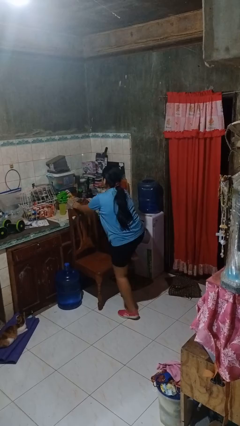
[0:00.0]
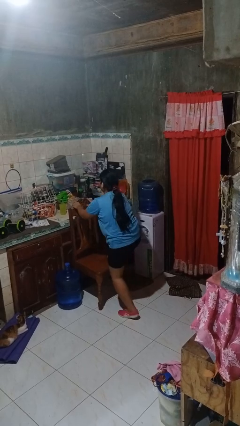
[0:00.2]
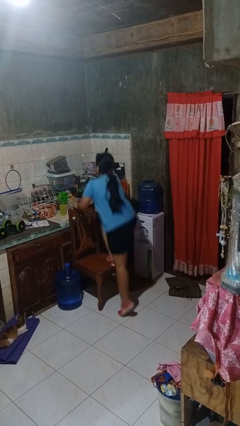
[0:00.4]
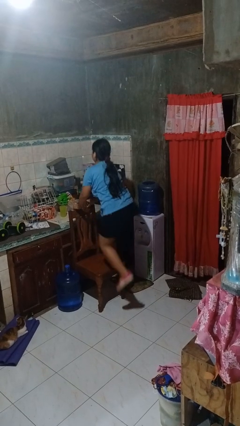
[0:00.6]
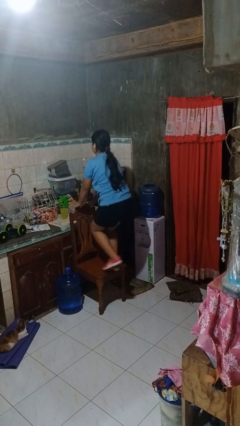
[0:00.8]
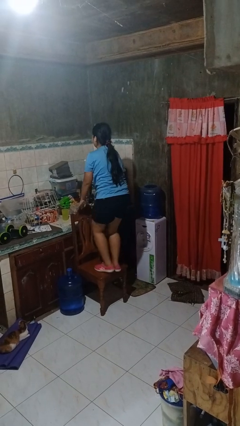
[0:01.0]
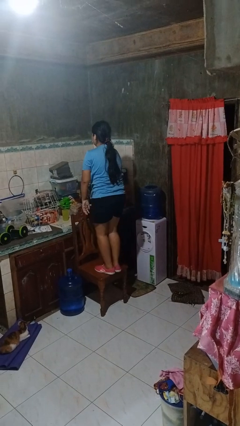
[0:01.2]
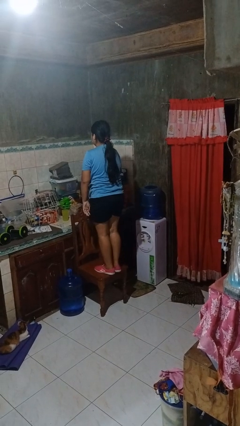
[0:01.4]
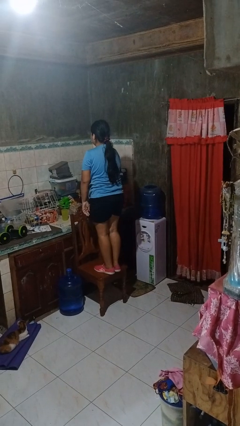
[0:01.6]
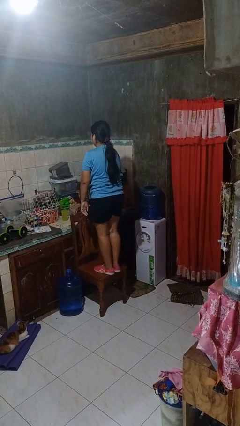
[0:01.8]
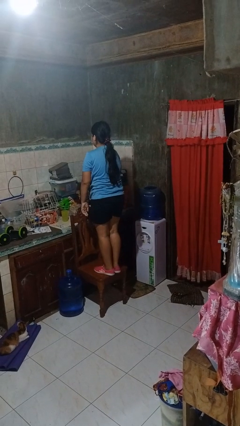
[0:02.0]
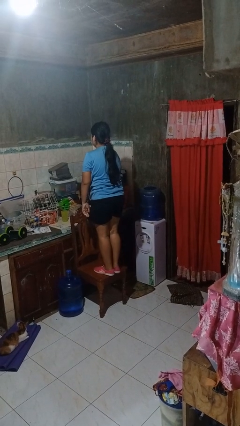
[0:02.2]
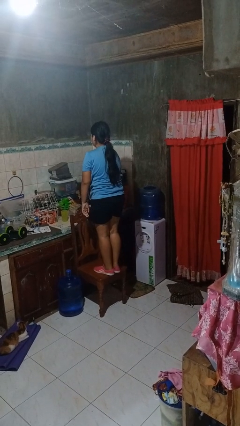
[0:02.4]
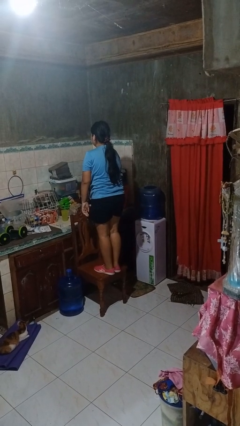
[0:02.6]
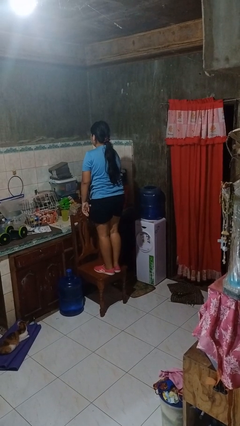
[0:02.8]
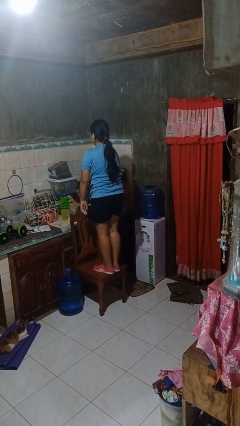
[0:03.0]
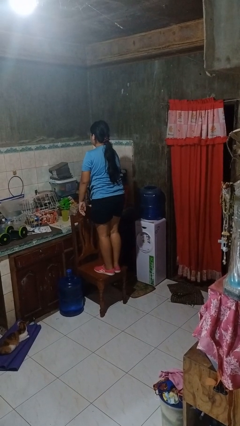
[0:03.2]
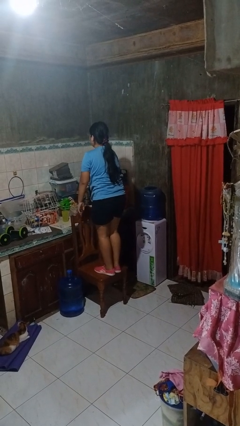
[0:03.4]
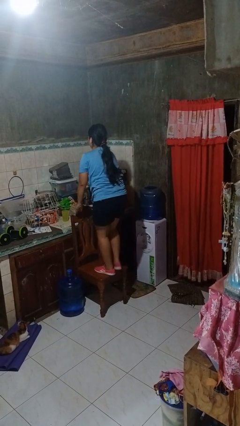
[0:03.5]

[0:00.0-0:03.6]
person climbs on chair

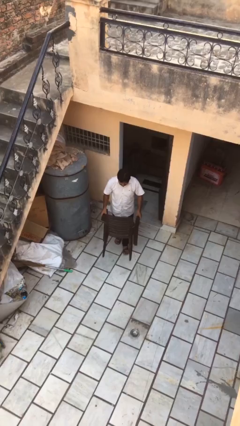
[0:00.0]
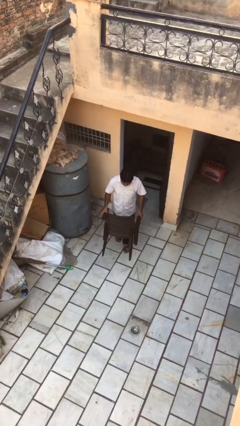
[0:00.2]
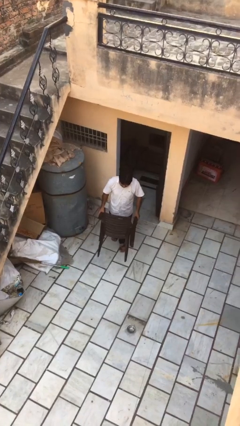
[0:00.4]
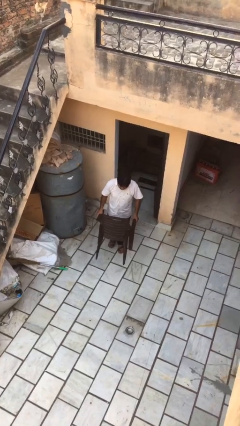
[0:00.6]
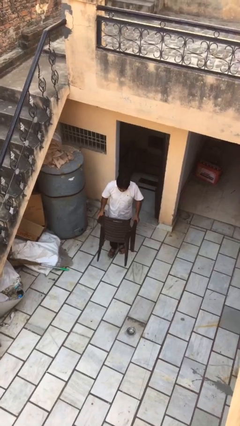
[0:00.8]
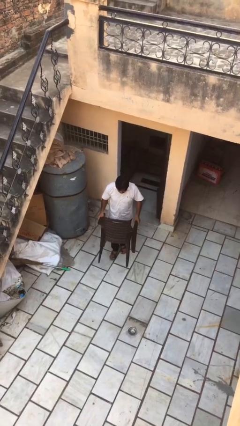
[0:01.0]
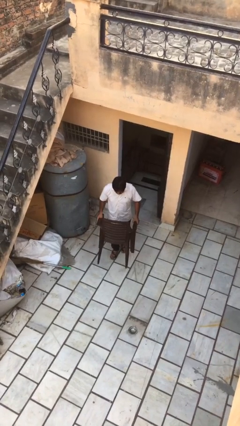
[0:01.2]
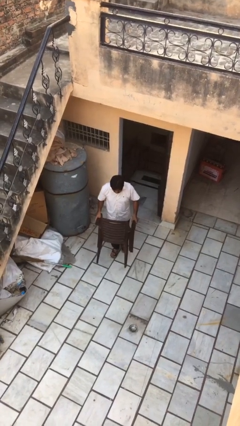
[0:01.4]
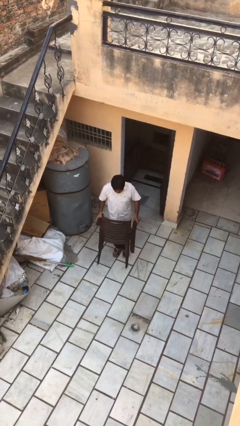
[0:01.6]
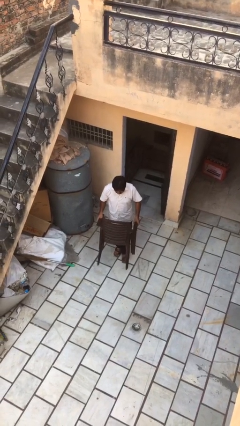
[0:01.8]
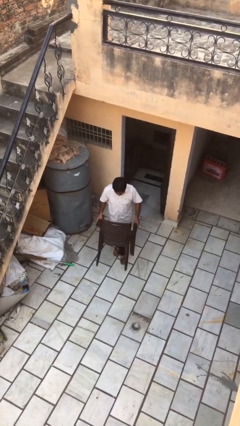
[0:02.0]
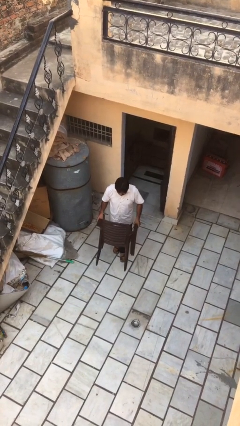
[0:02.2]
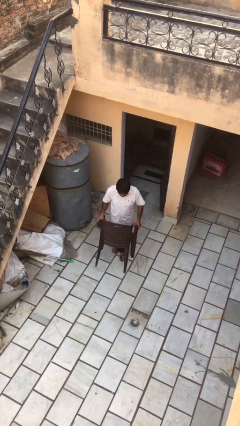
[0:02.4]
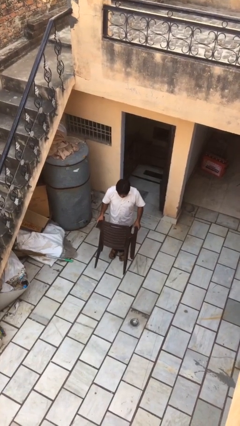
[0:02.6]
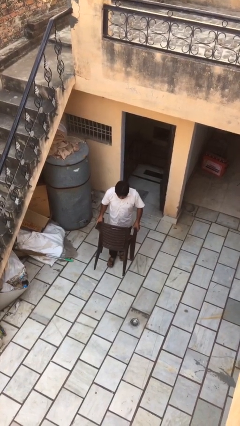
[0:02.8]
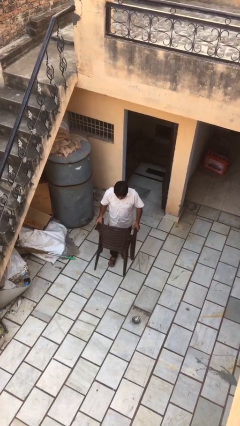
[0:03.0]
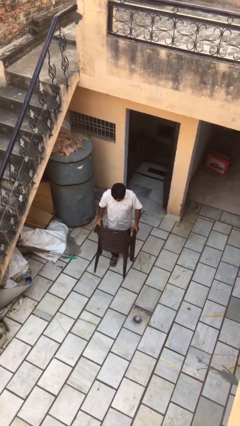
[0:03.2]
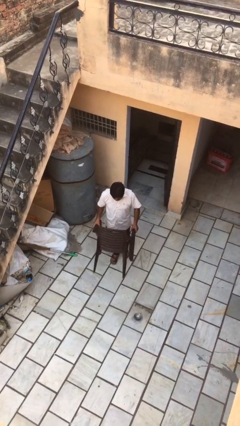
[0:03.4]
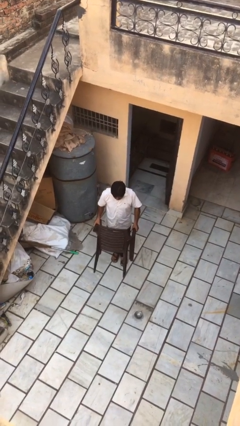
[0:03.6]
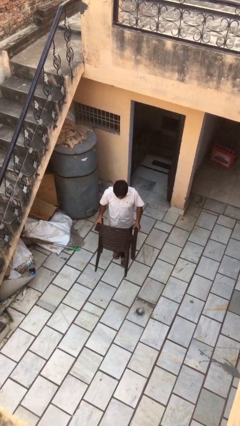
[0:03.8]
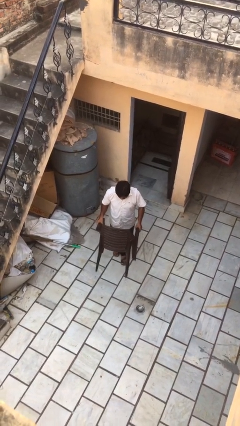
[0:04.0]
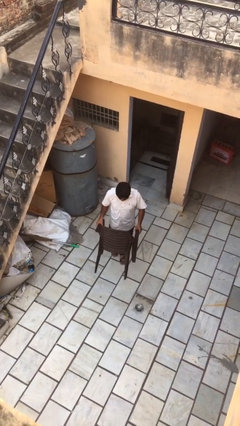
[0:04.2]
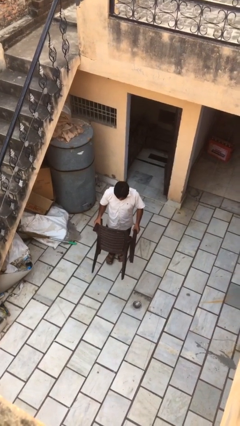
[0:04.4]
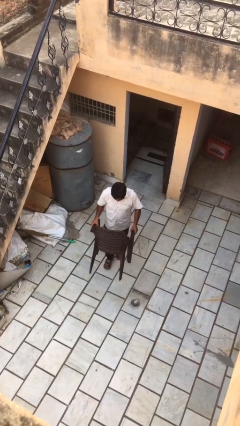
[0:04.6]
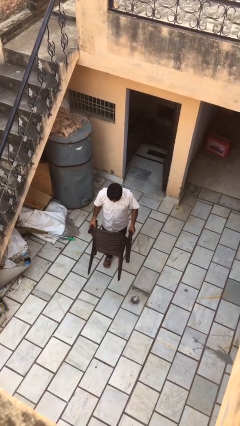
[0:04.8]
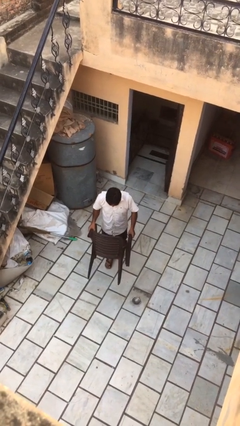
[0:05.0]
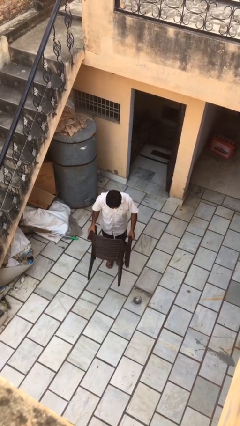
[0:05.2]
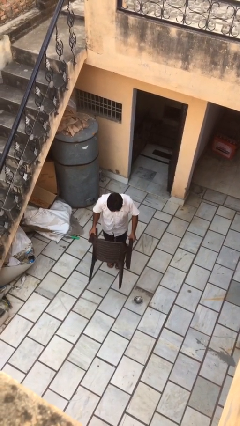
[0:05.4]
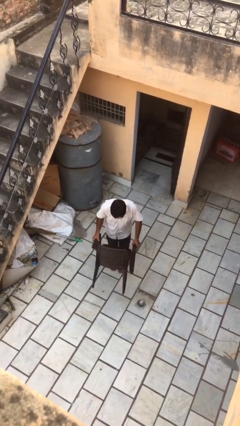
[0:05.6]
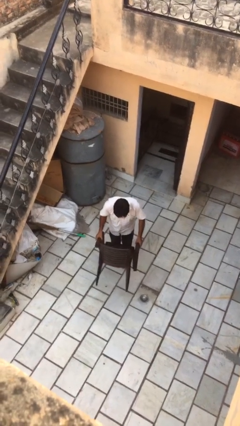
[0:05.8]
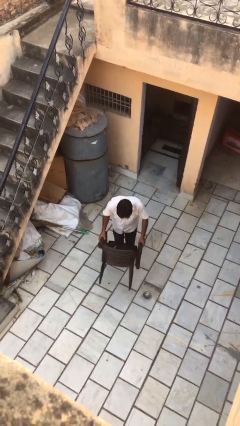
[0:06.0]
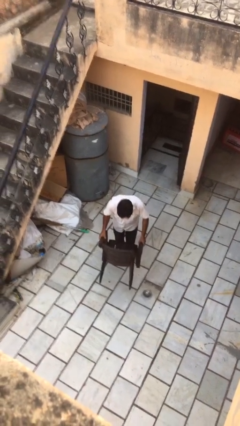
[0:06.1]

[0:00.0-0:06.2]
person carries heavy object

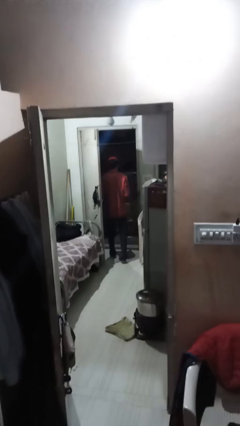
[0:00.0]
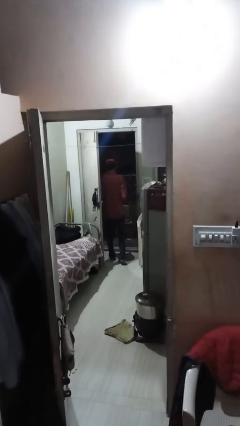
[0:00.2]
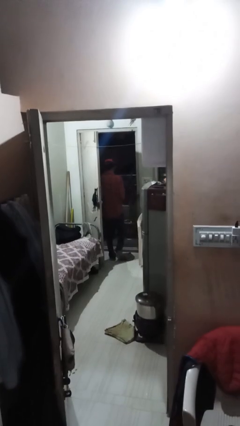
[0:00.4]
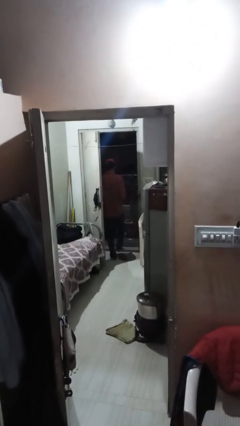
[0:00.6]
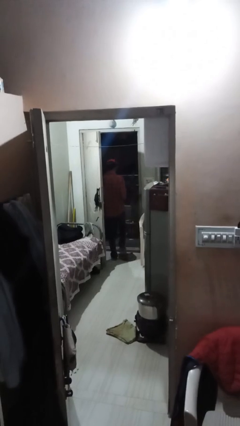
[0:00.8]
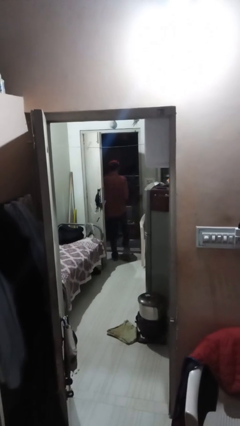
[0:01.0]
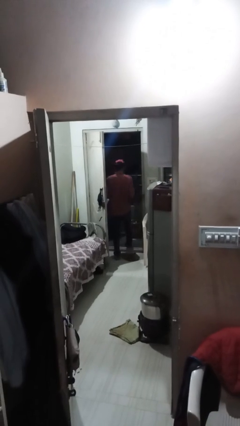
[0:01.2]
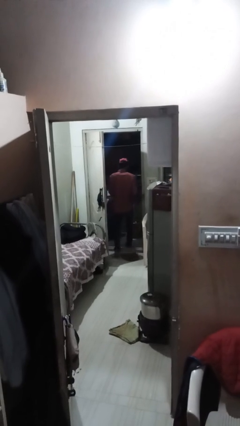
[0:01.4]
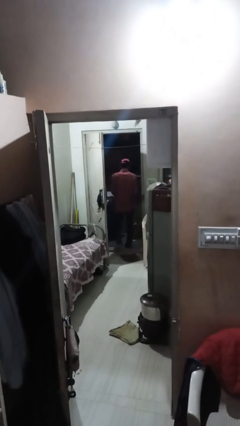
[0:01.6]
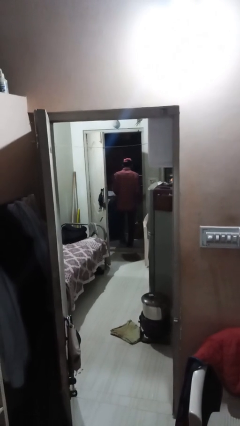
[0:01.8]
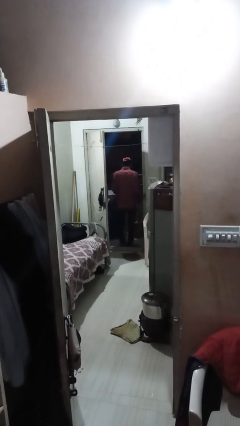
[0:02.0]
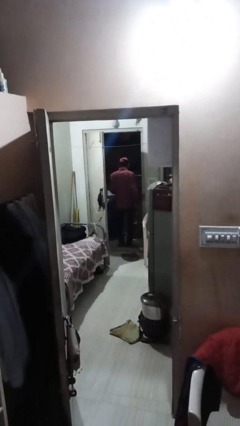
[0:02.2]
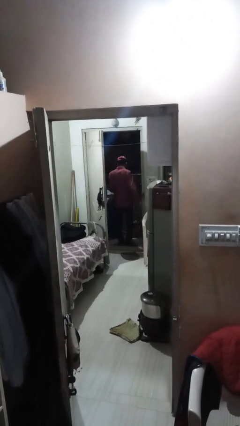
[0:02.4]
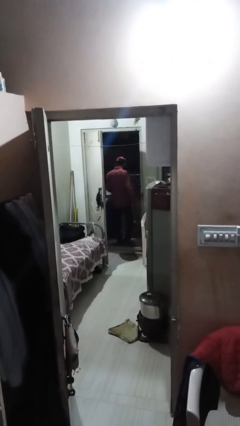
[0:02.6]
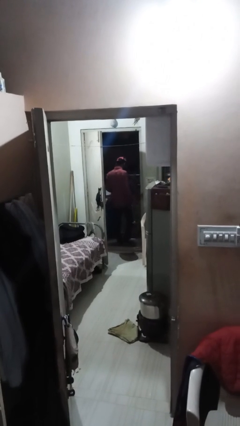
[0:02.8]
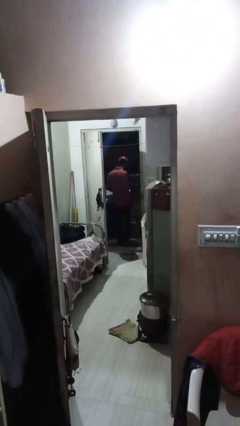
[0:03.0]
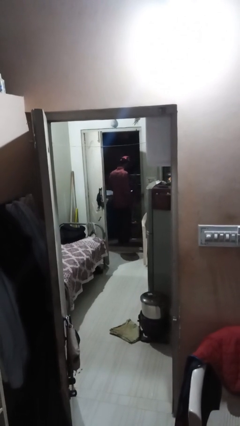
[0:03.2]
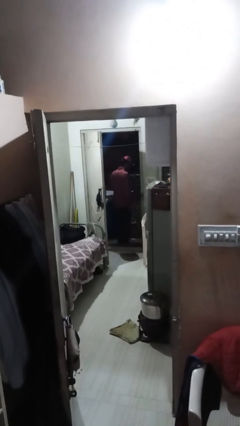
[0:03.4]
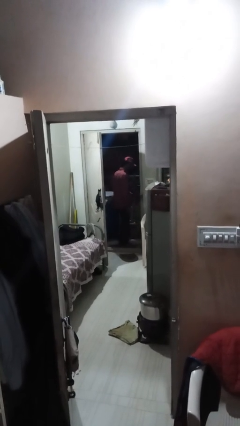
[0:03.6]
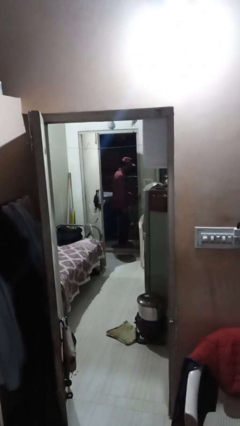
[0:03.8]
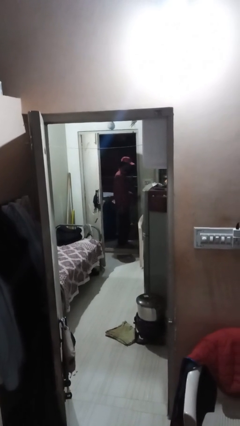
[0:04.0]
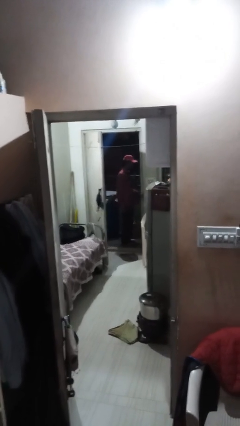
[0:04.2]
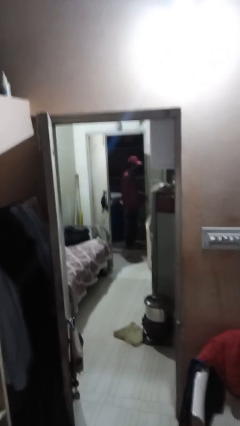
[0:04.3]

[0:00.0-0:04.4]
person exits scene through structure

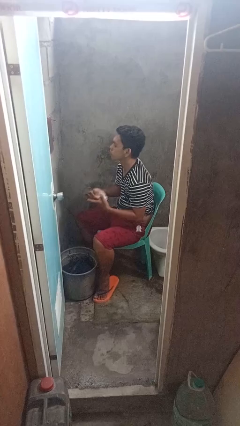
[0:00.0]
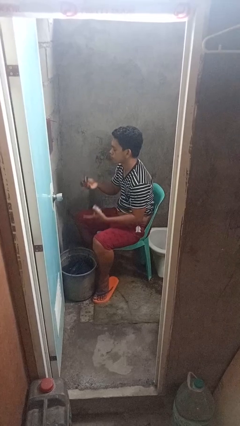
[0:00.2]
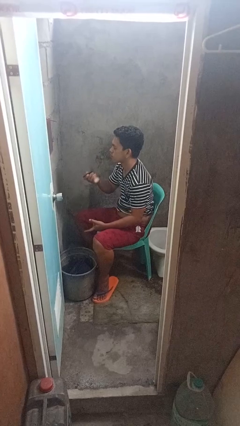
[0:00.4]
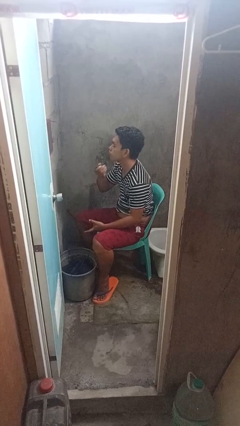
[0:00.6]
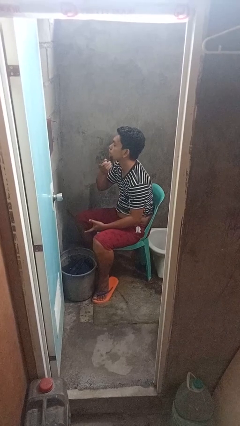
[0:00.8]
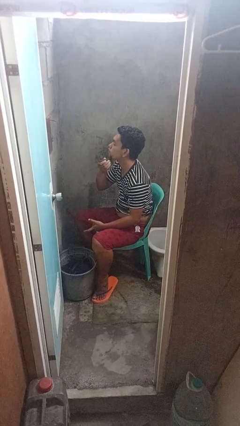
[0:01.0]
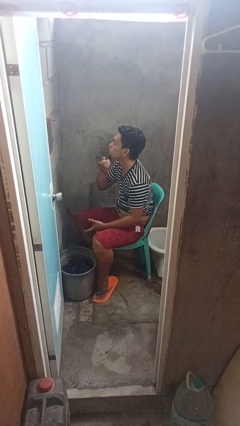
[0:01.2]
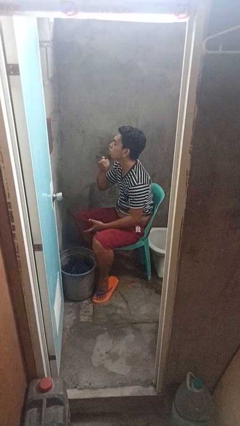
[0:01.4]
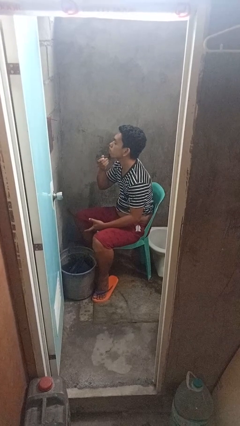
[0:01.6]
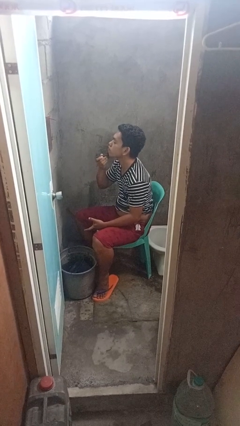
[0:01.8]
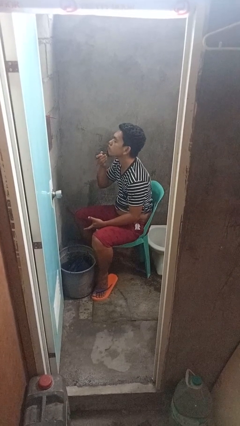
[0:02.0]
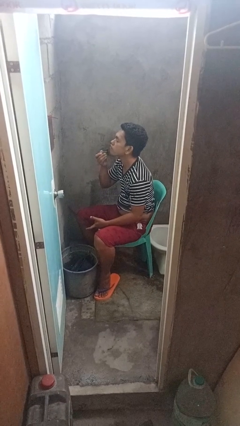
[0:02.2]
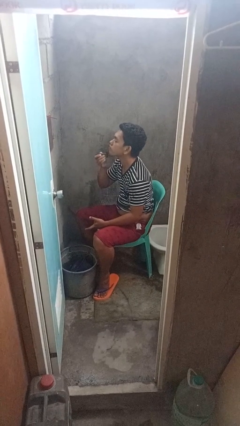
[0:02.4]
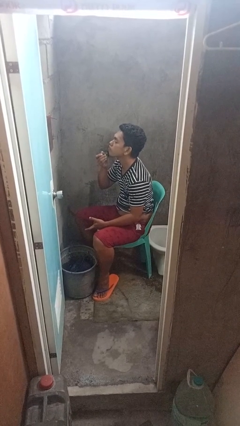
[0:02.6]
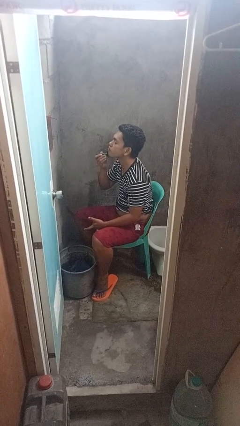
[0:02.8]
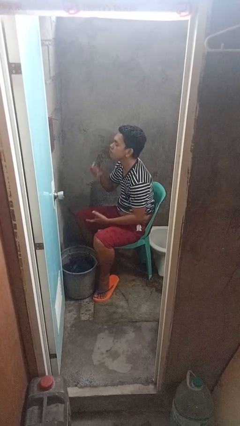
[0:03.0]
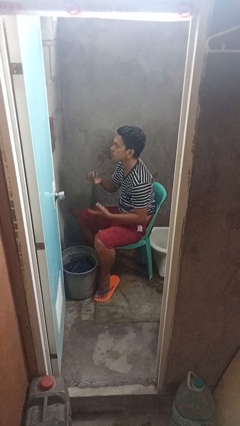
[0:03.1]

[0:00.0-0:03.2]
person shaves face

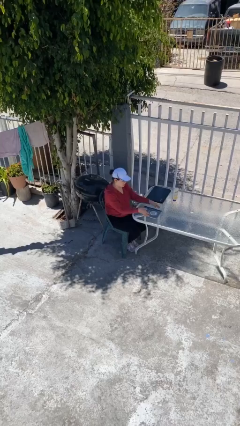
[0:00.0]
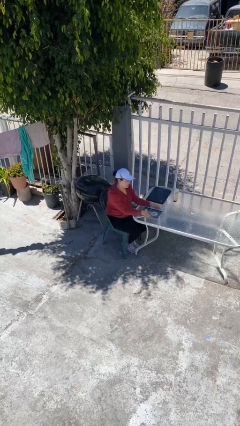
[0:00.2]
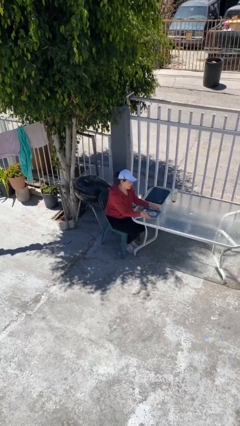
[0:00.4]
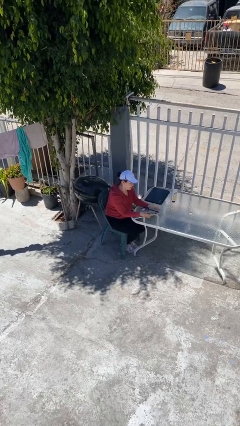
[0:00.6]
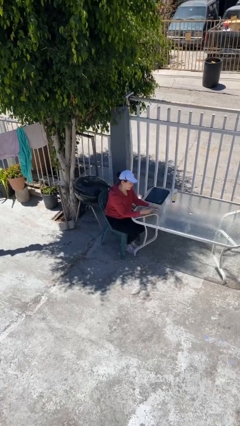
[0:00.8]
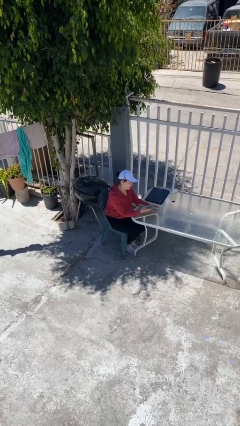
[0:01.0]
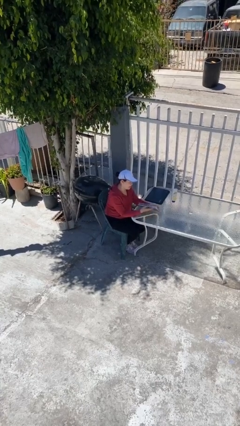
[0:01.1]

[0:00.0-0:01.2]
person picks up object from table
